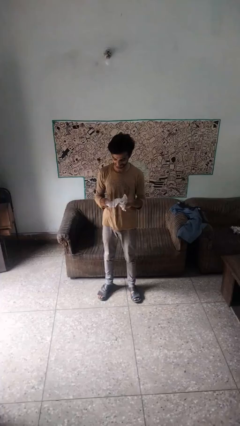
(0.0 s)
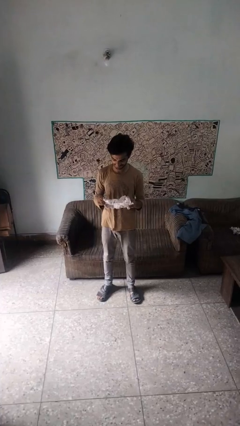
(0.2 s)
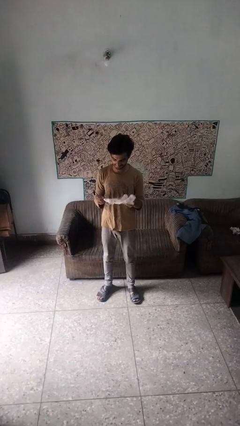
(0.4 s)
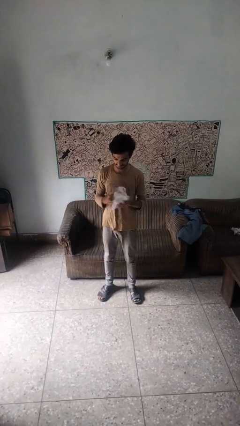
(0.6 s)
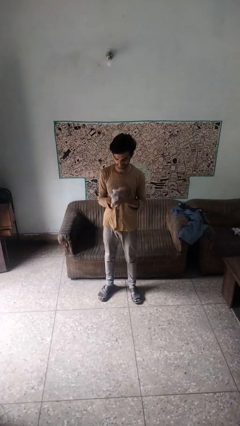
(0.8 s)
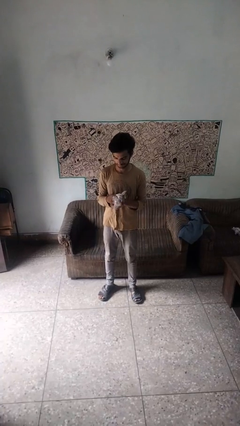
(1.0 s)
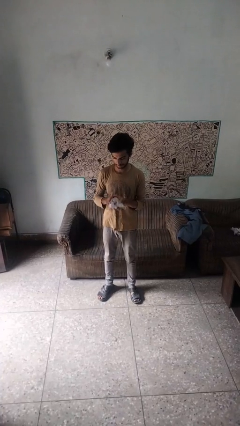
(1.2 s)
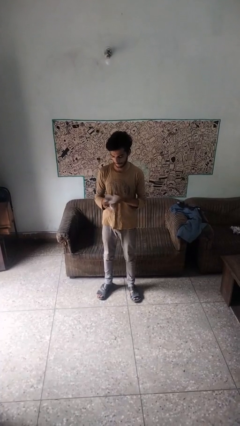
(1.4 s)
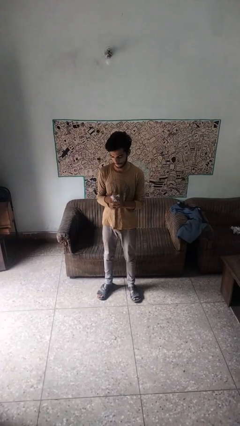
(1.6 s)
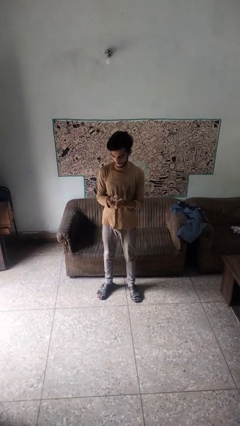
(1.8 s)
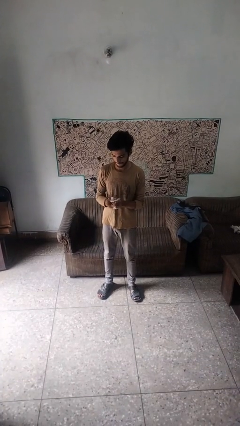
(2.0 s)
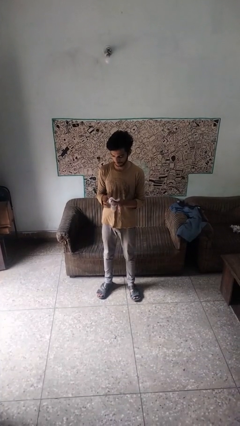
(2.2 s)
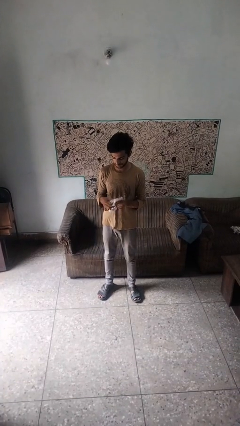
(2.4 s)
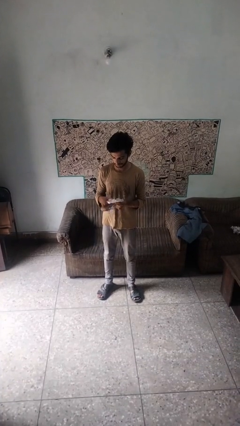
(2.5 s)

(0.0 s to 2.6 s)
person crumples paper

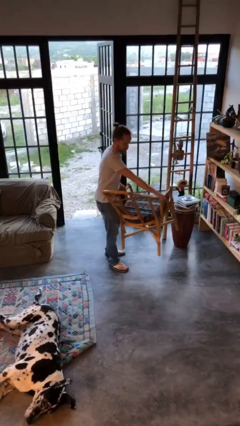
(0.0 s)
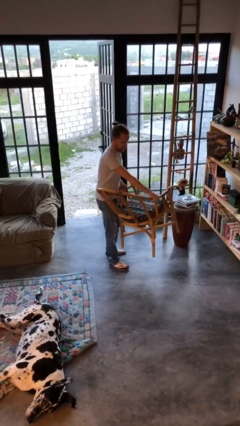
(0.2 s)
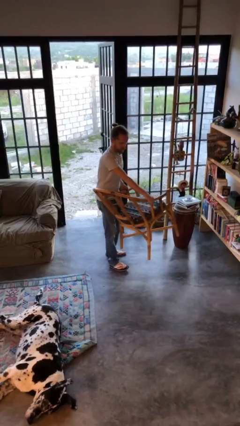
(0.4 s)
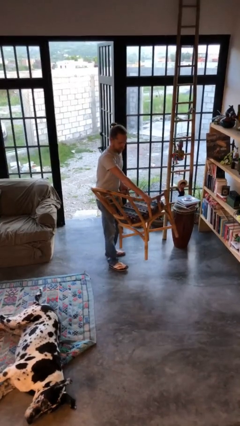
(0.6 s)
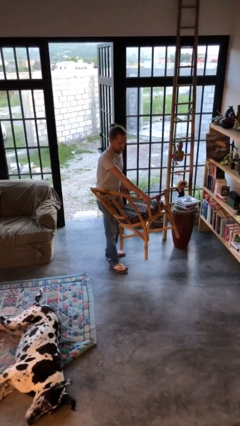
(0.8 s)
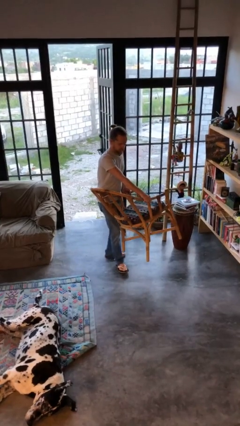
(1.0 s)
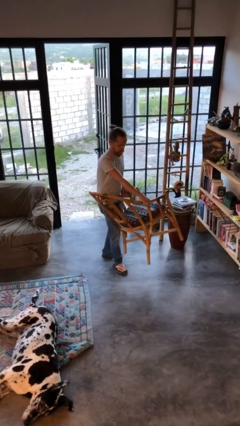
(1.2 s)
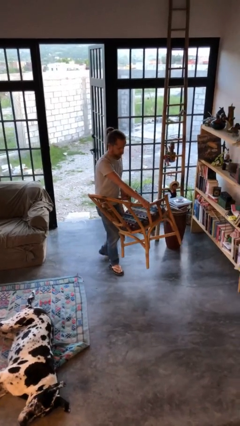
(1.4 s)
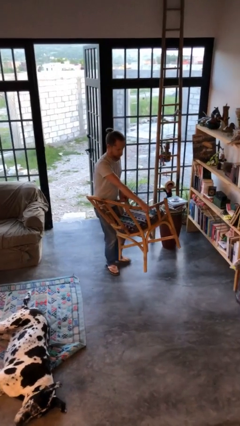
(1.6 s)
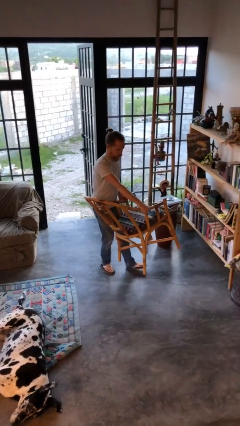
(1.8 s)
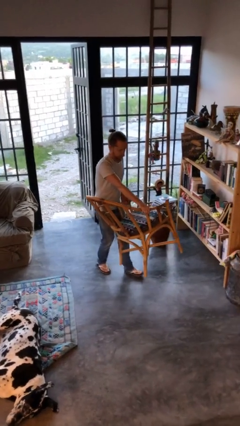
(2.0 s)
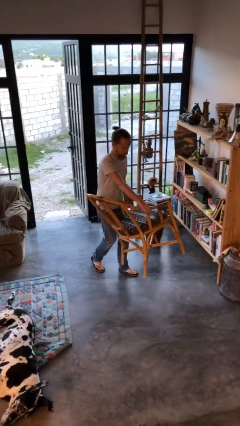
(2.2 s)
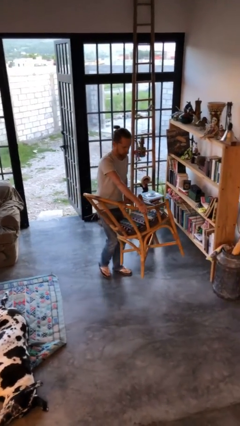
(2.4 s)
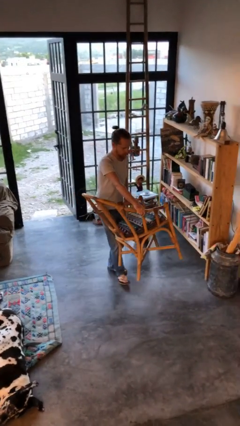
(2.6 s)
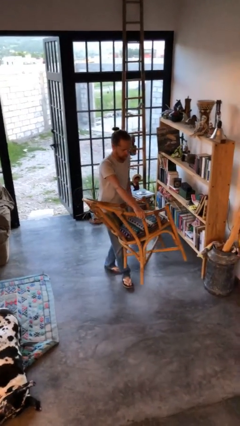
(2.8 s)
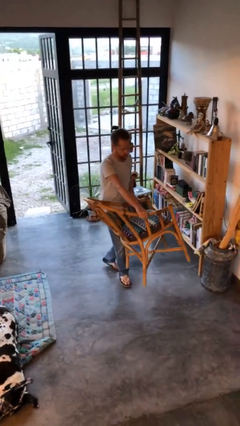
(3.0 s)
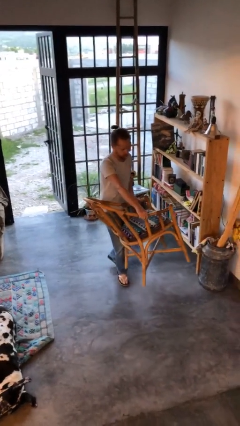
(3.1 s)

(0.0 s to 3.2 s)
person carries furniture

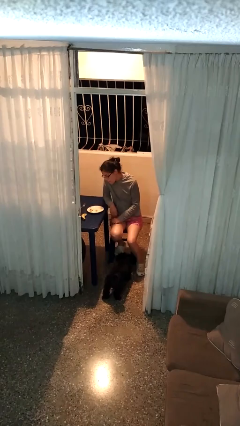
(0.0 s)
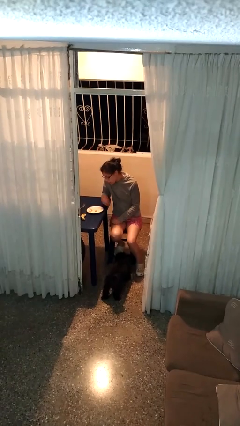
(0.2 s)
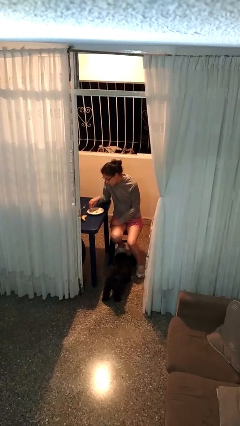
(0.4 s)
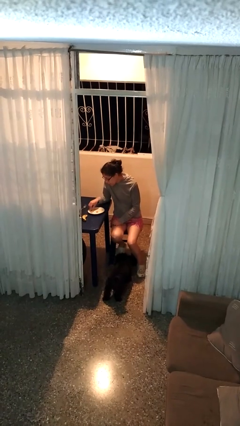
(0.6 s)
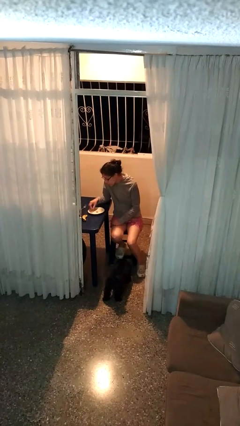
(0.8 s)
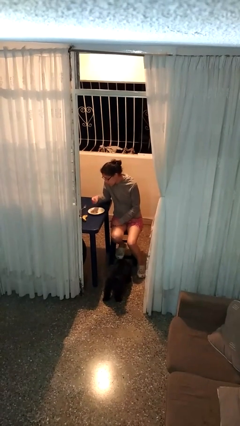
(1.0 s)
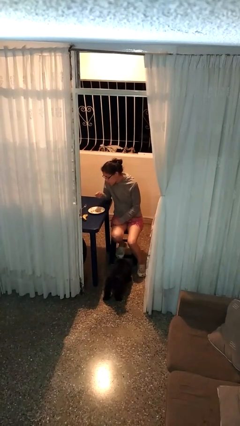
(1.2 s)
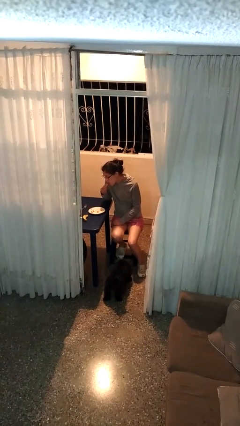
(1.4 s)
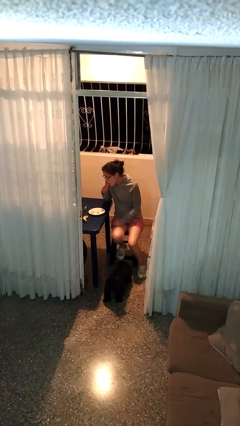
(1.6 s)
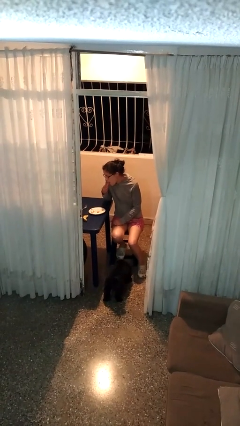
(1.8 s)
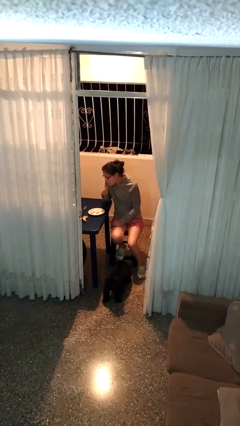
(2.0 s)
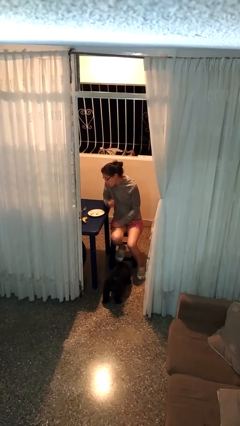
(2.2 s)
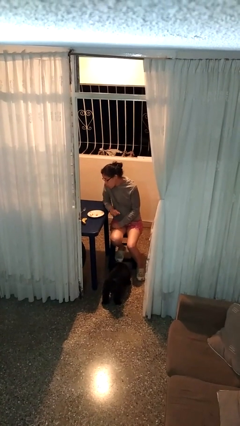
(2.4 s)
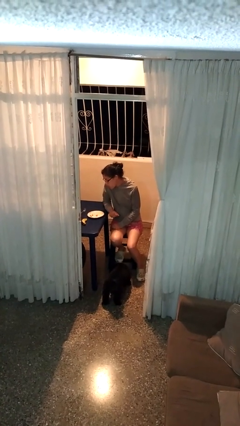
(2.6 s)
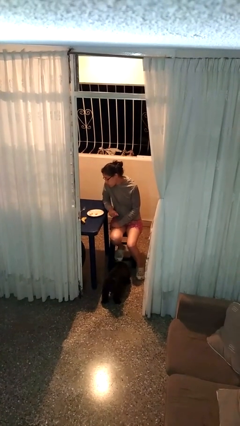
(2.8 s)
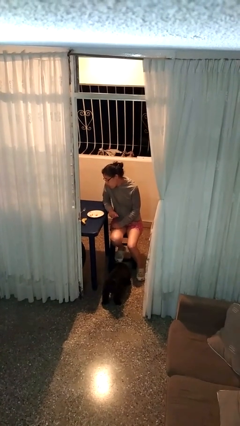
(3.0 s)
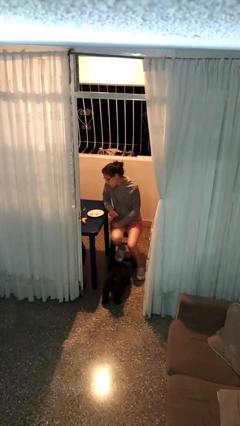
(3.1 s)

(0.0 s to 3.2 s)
person eats with hands

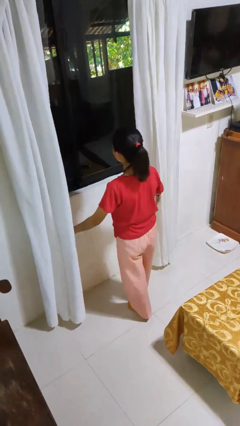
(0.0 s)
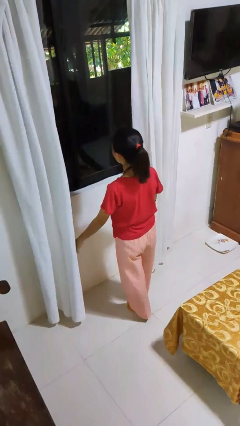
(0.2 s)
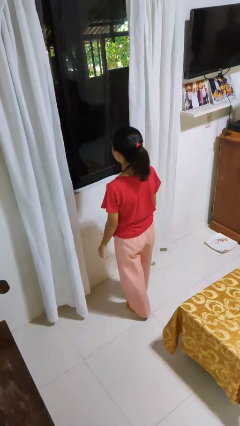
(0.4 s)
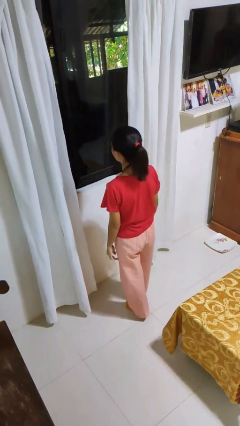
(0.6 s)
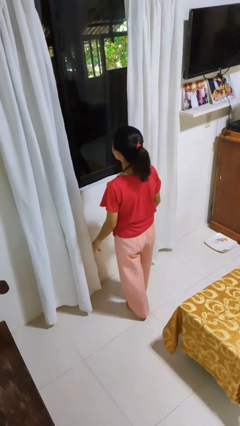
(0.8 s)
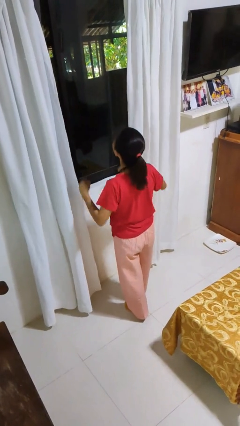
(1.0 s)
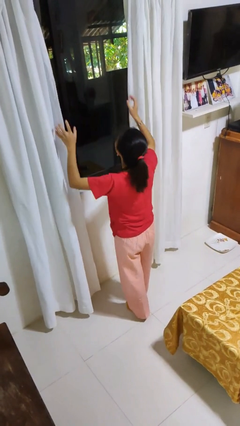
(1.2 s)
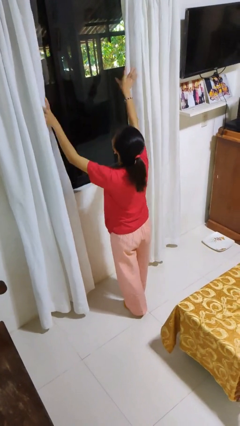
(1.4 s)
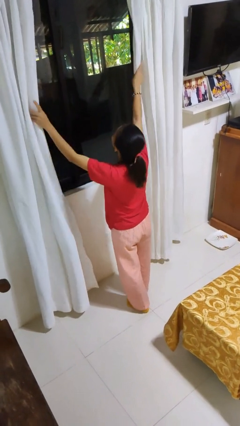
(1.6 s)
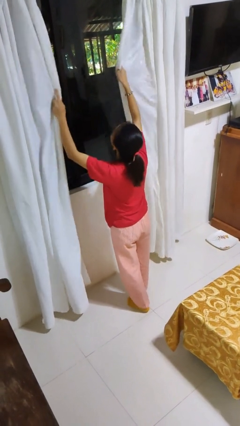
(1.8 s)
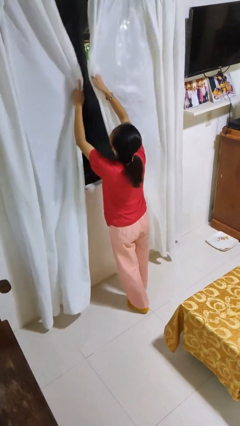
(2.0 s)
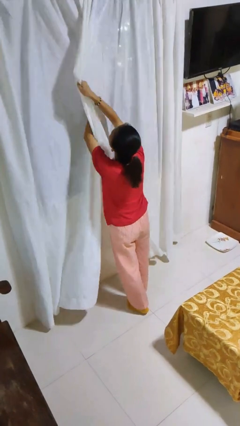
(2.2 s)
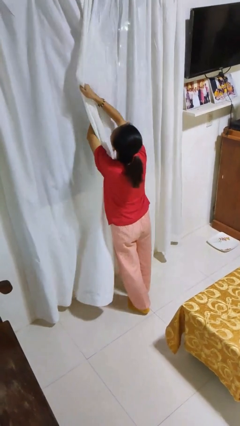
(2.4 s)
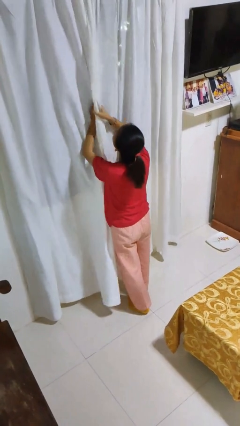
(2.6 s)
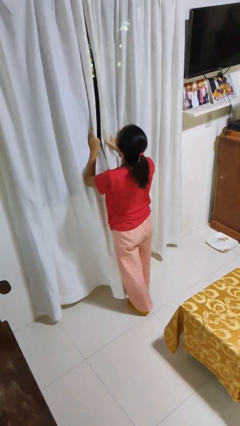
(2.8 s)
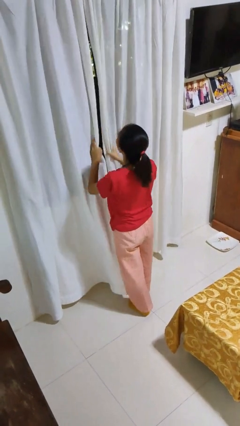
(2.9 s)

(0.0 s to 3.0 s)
person closes curtains

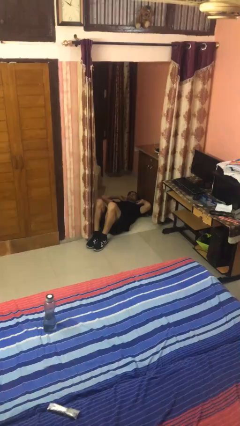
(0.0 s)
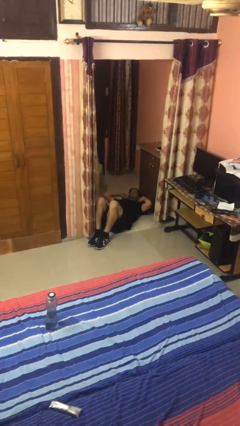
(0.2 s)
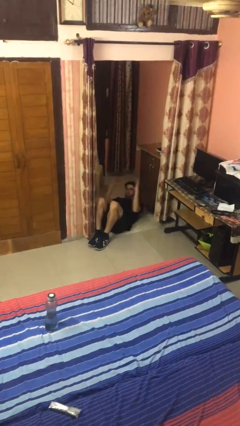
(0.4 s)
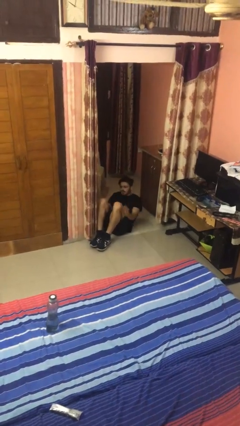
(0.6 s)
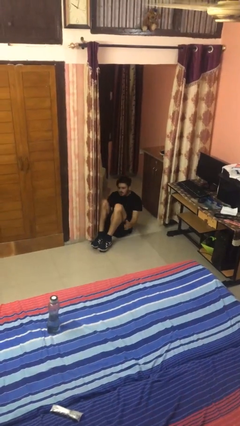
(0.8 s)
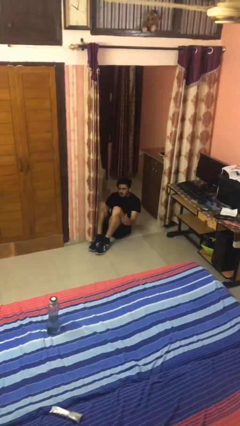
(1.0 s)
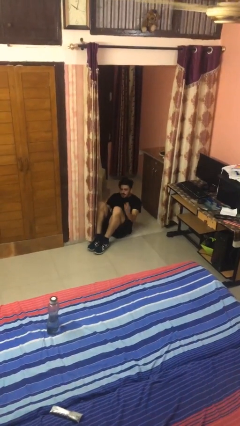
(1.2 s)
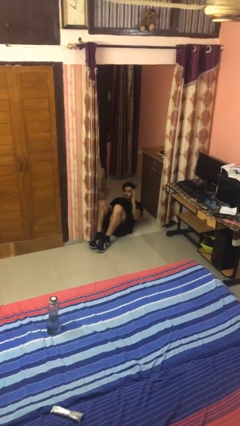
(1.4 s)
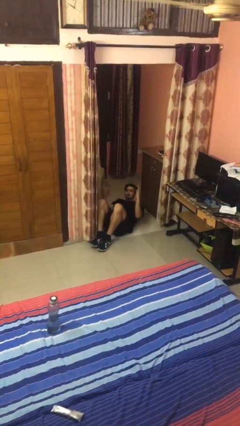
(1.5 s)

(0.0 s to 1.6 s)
person exercises with situp

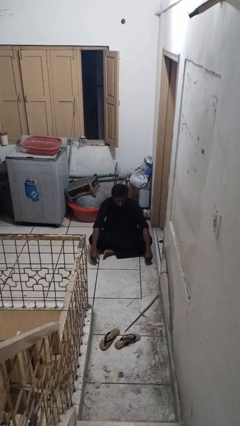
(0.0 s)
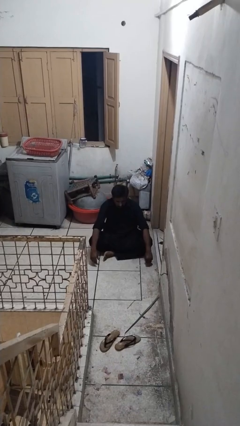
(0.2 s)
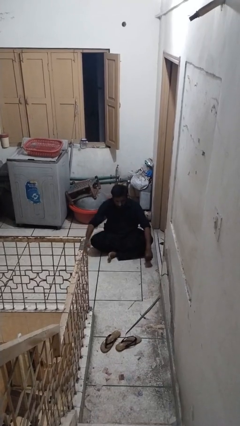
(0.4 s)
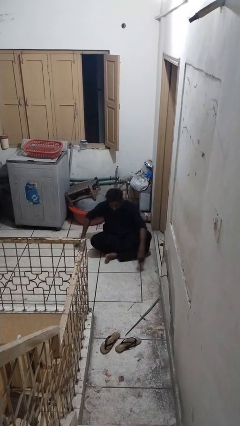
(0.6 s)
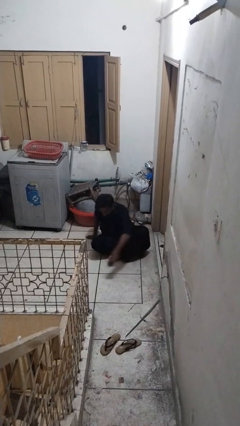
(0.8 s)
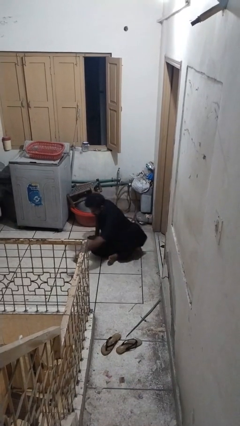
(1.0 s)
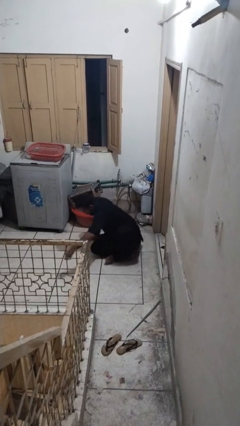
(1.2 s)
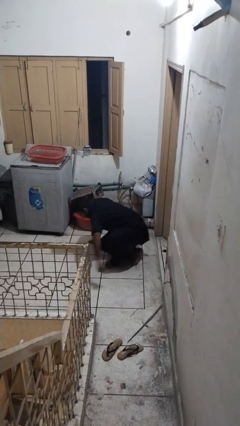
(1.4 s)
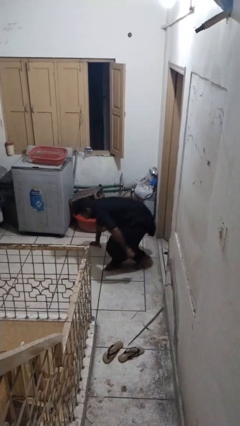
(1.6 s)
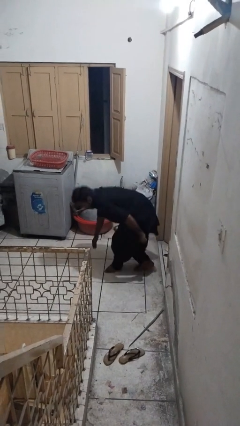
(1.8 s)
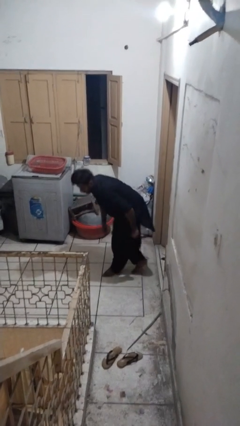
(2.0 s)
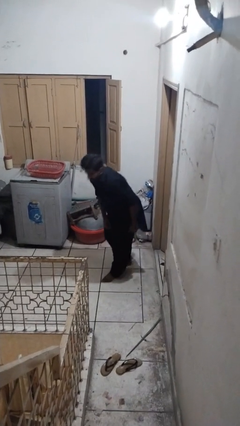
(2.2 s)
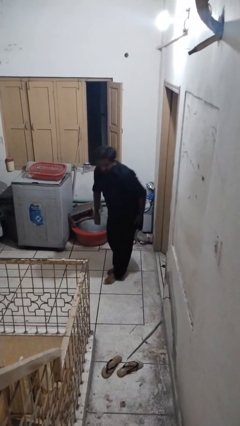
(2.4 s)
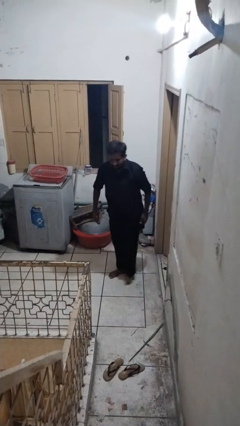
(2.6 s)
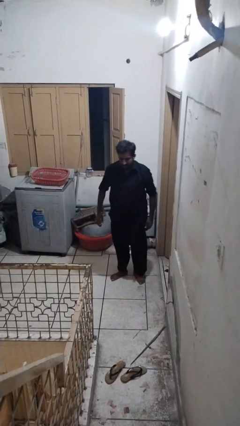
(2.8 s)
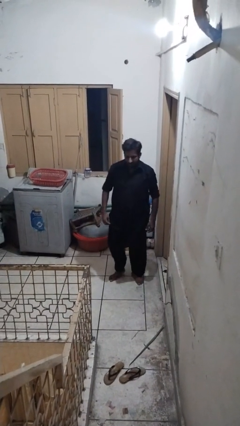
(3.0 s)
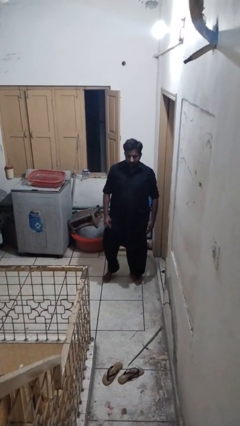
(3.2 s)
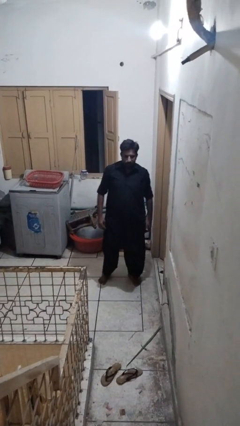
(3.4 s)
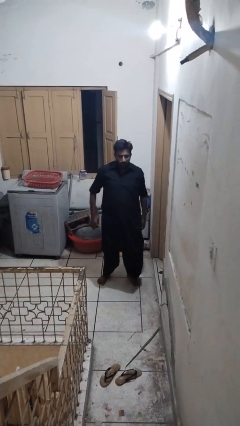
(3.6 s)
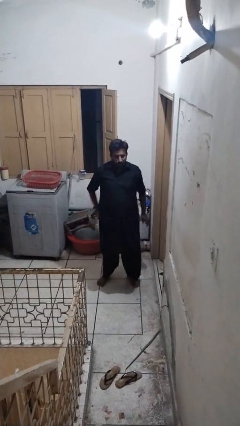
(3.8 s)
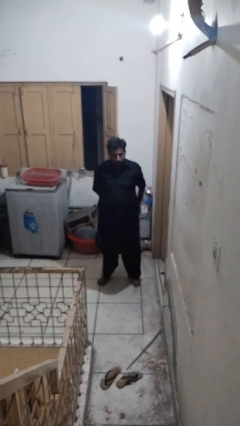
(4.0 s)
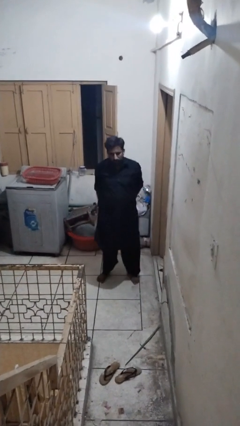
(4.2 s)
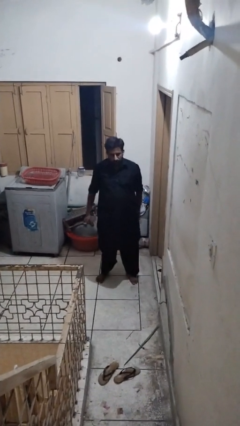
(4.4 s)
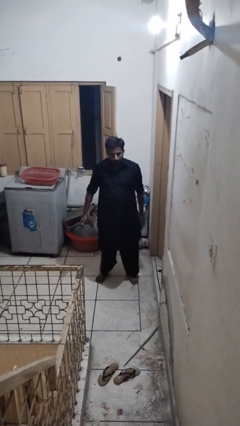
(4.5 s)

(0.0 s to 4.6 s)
person stands up from floor
